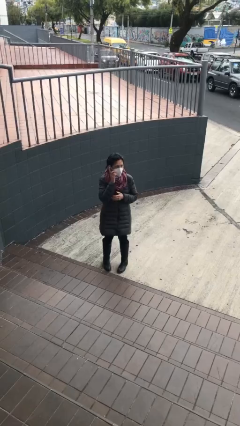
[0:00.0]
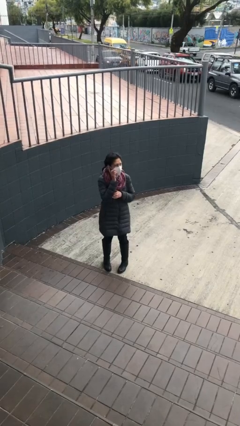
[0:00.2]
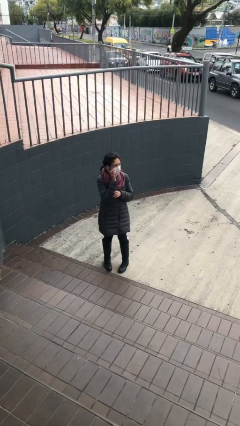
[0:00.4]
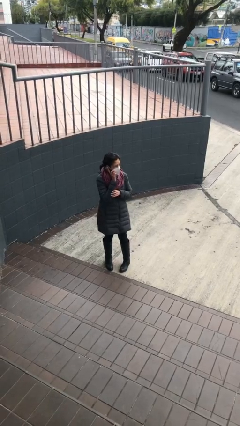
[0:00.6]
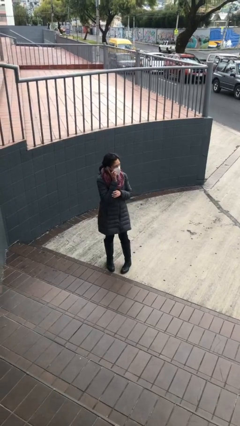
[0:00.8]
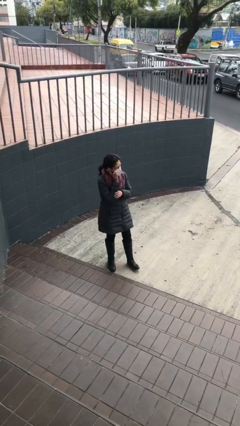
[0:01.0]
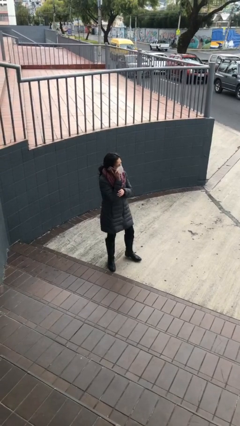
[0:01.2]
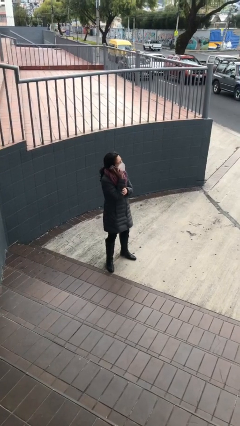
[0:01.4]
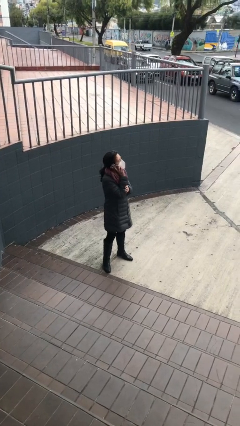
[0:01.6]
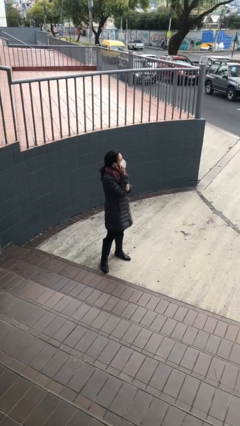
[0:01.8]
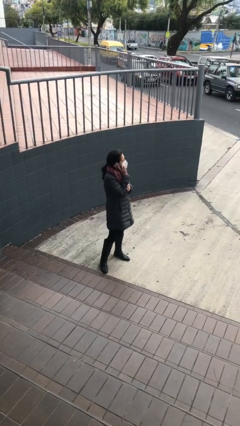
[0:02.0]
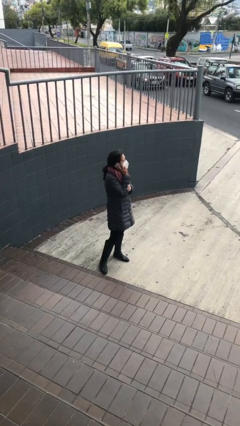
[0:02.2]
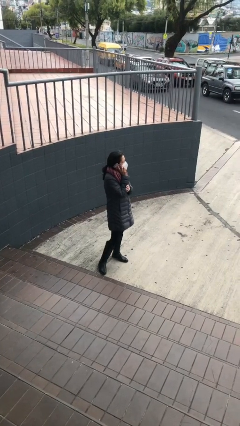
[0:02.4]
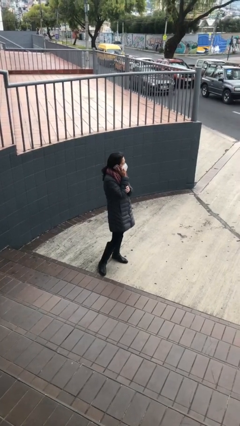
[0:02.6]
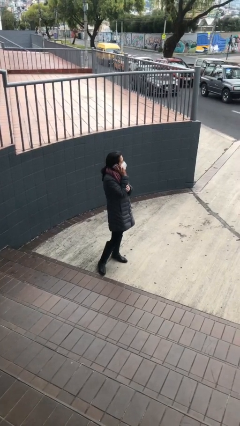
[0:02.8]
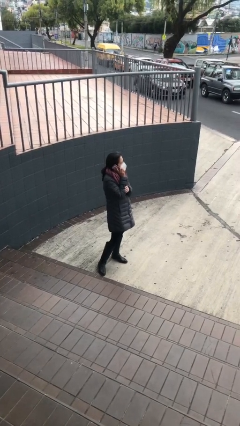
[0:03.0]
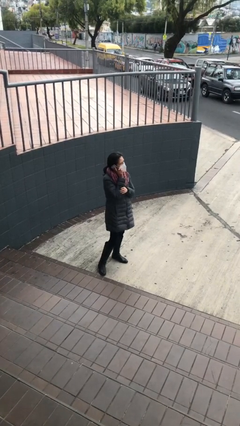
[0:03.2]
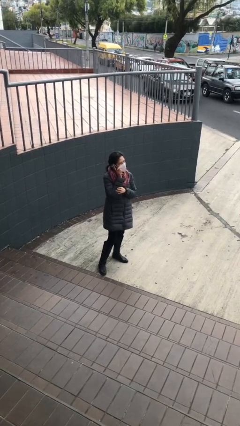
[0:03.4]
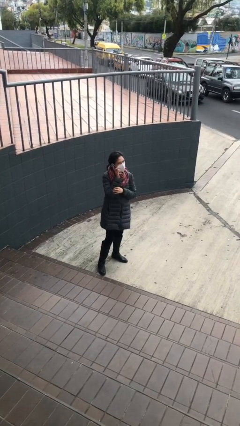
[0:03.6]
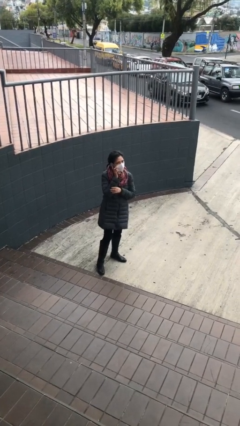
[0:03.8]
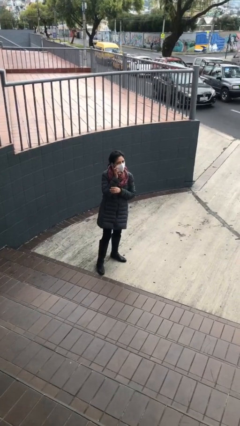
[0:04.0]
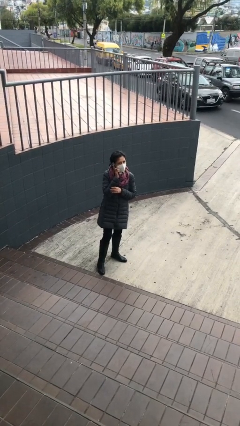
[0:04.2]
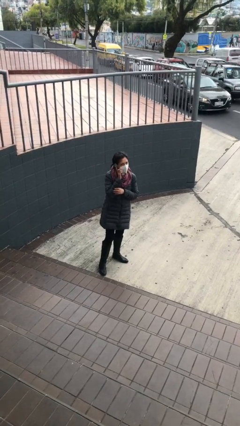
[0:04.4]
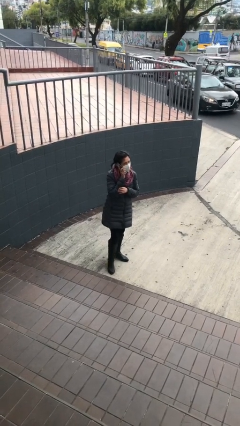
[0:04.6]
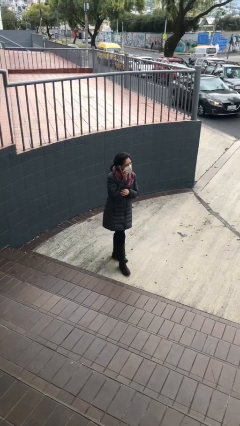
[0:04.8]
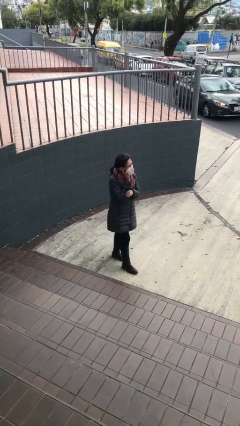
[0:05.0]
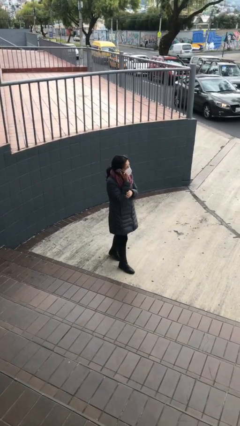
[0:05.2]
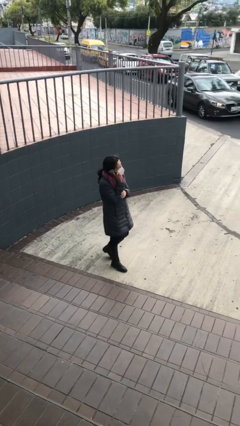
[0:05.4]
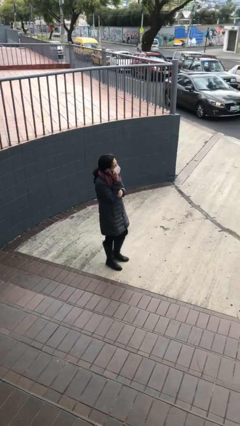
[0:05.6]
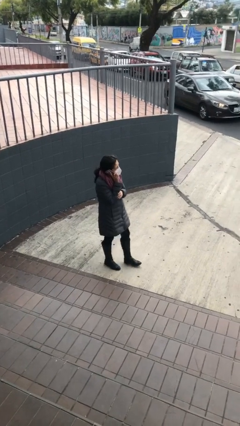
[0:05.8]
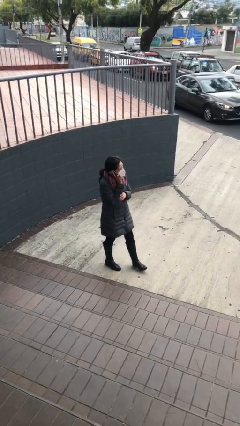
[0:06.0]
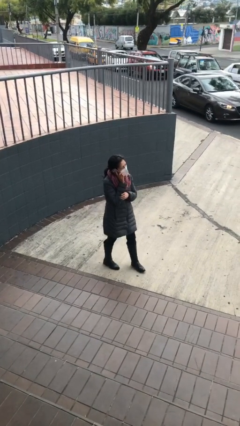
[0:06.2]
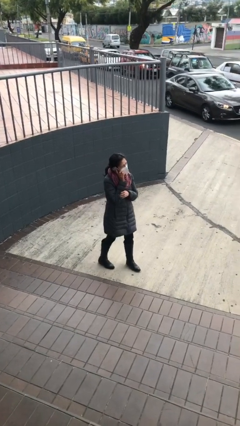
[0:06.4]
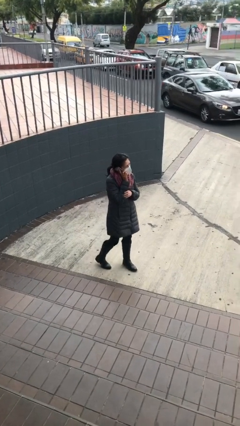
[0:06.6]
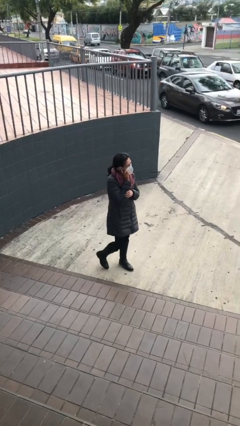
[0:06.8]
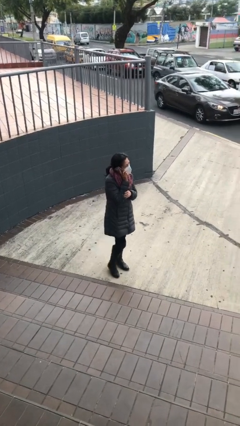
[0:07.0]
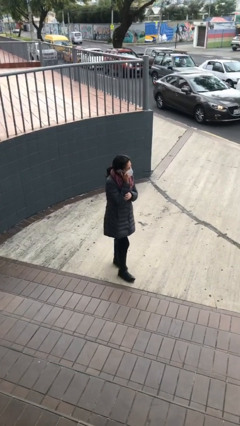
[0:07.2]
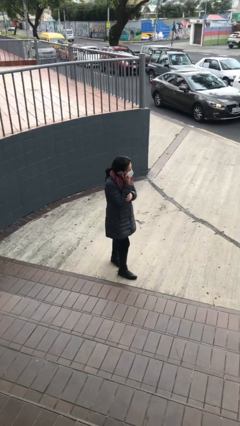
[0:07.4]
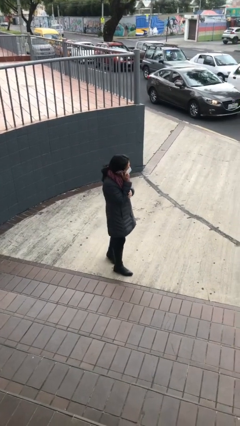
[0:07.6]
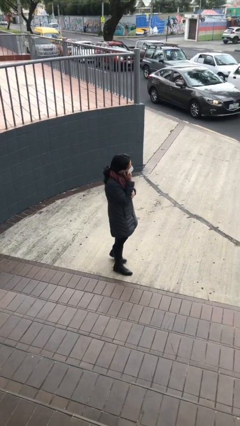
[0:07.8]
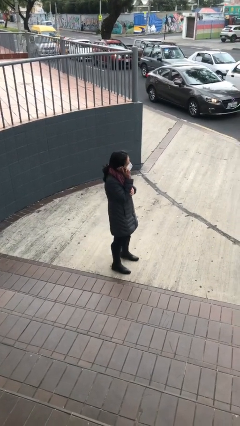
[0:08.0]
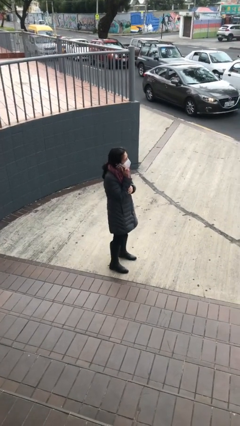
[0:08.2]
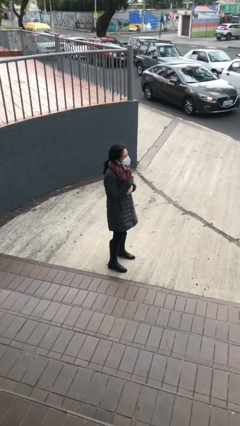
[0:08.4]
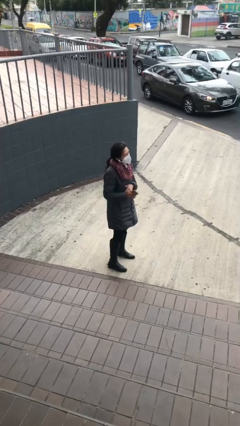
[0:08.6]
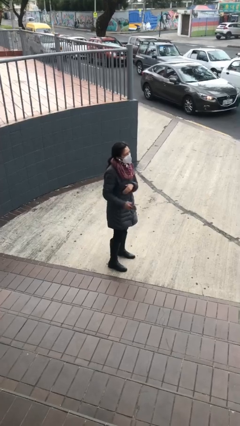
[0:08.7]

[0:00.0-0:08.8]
person talks on phone

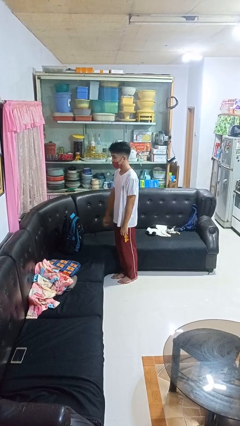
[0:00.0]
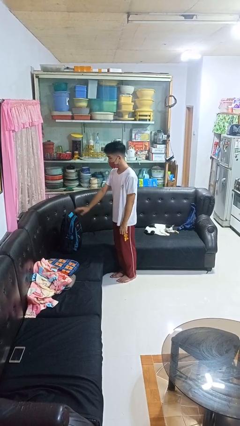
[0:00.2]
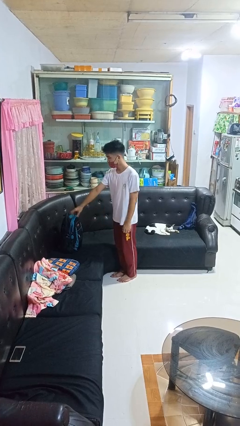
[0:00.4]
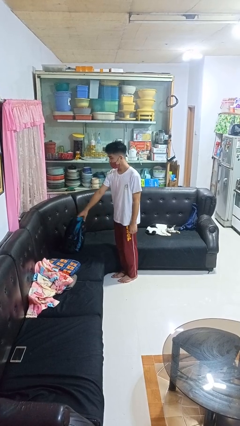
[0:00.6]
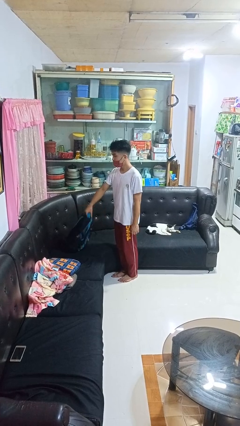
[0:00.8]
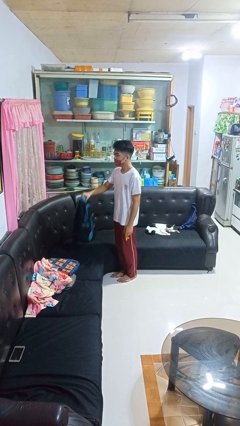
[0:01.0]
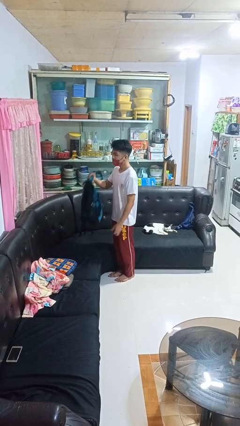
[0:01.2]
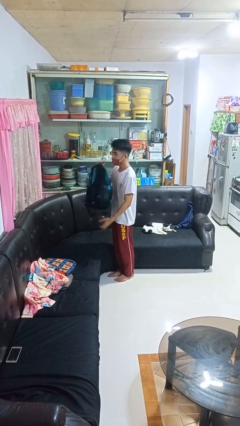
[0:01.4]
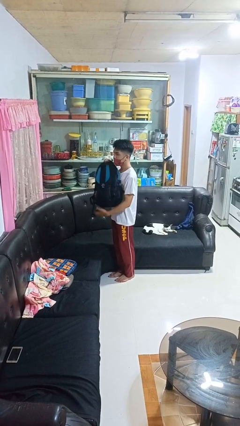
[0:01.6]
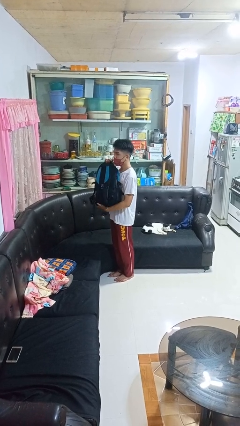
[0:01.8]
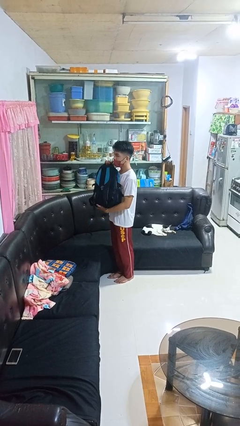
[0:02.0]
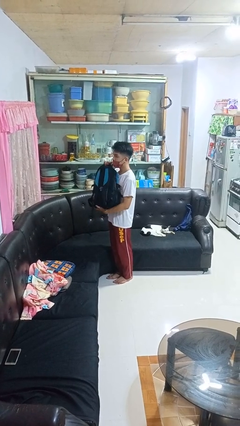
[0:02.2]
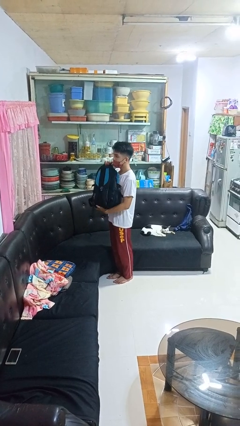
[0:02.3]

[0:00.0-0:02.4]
person picks up object from couch

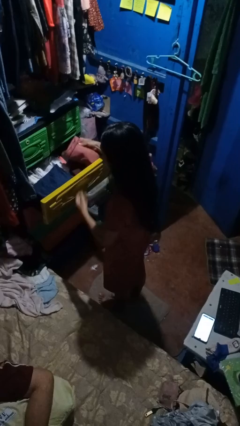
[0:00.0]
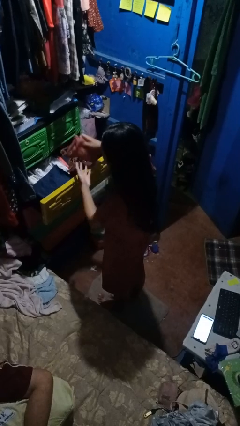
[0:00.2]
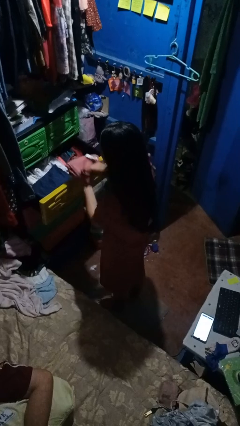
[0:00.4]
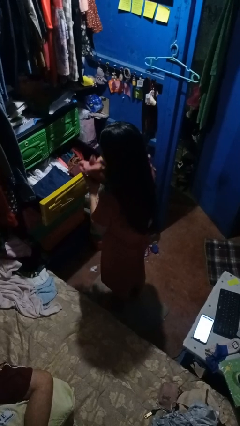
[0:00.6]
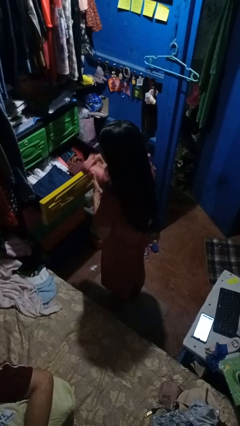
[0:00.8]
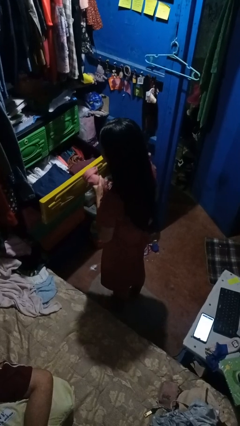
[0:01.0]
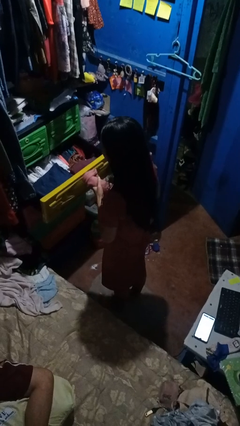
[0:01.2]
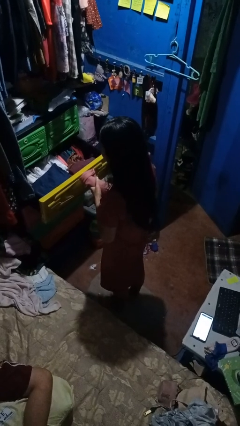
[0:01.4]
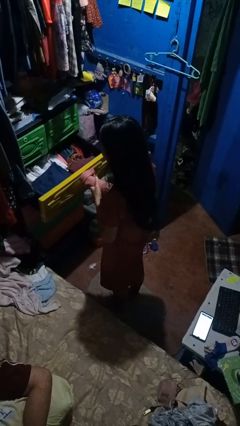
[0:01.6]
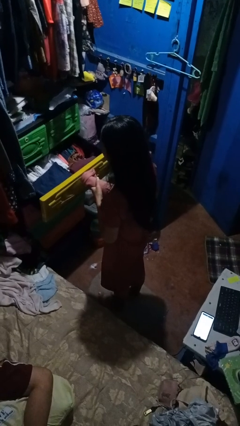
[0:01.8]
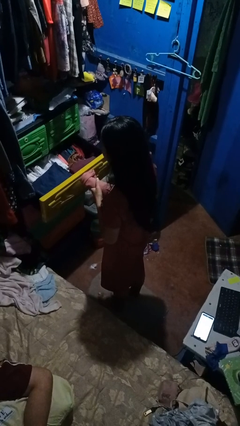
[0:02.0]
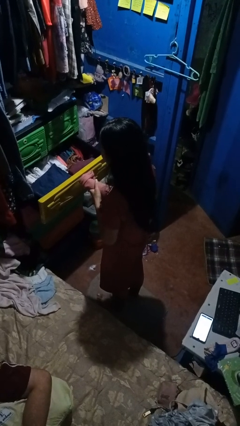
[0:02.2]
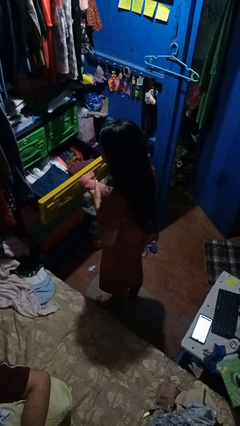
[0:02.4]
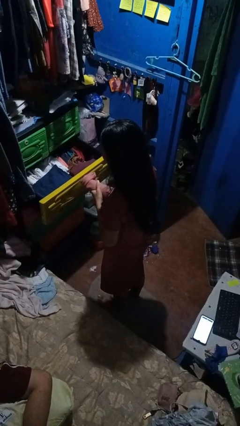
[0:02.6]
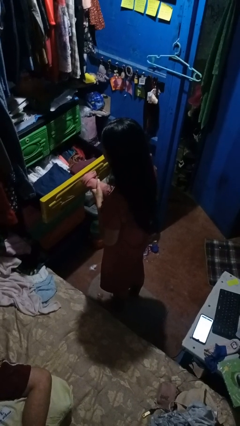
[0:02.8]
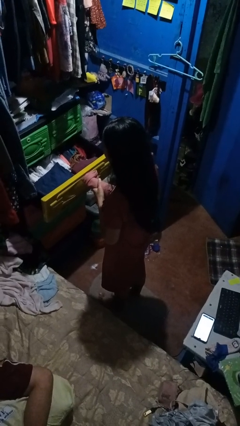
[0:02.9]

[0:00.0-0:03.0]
person takes clothes from dresser

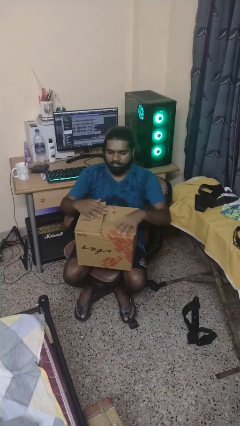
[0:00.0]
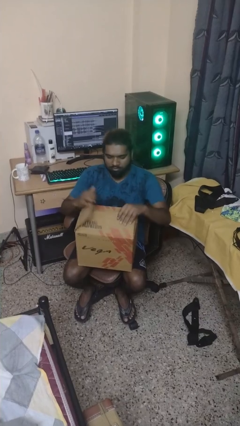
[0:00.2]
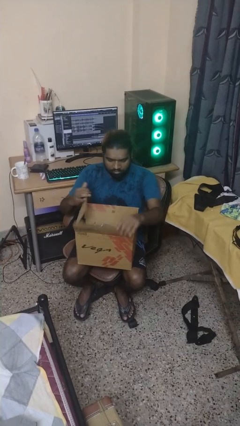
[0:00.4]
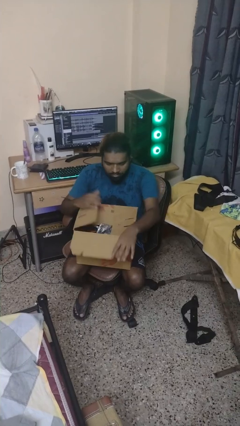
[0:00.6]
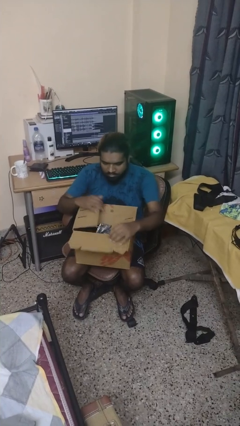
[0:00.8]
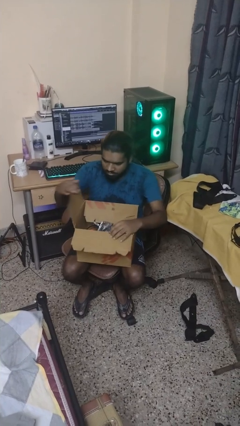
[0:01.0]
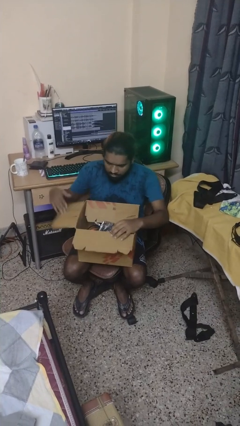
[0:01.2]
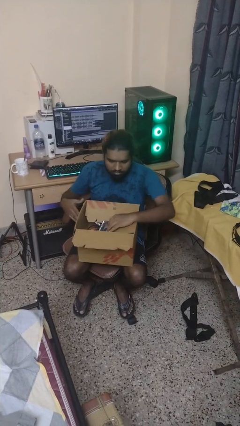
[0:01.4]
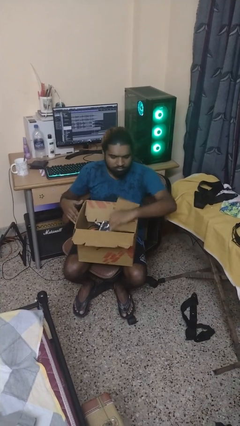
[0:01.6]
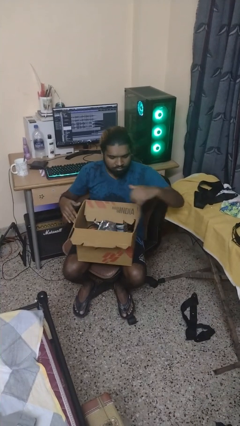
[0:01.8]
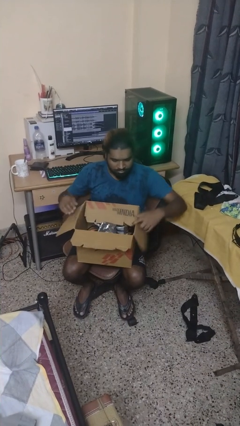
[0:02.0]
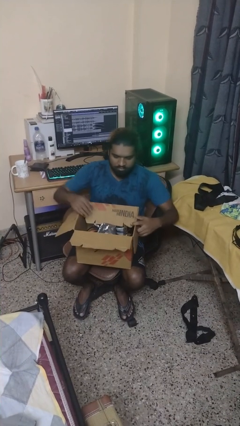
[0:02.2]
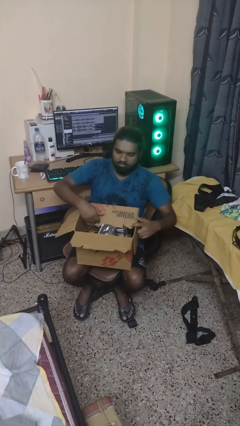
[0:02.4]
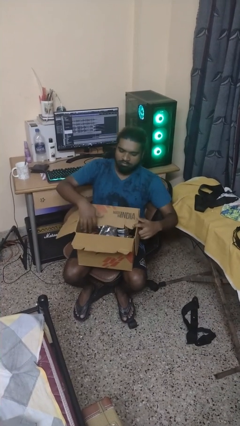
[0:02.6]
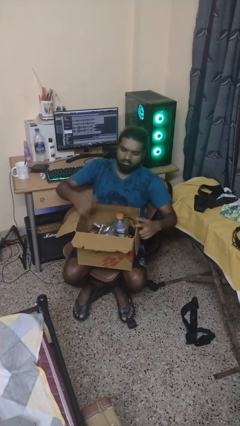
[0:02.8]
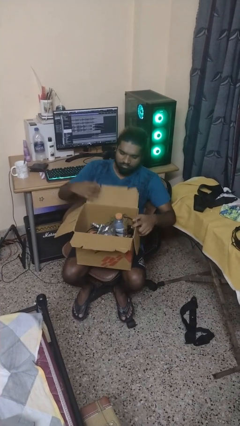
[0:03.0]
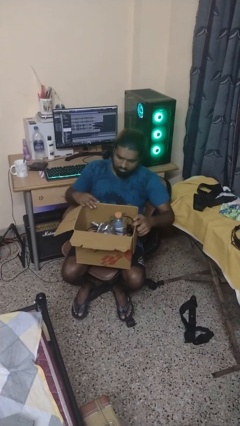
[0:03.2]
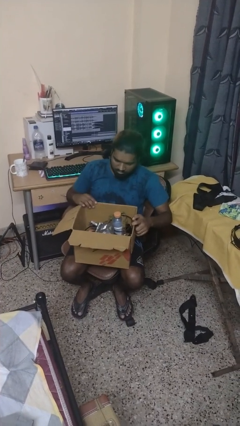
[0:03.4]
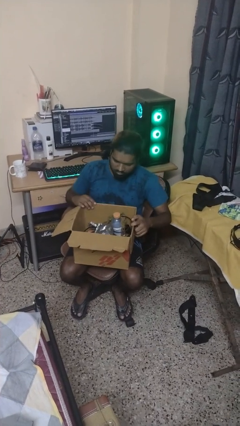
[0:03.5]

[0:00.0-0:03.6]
person opens box

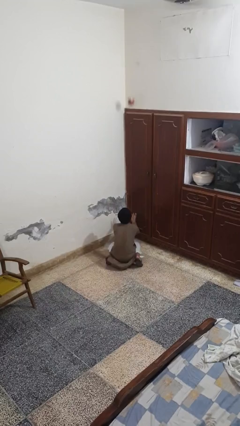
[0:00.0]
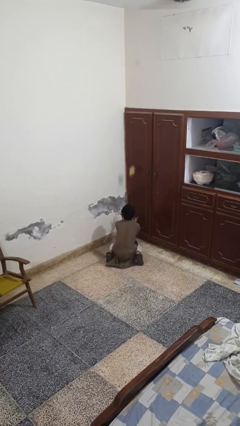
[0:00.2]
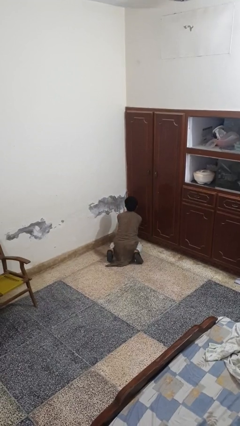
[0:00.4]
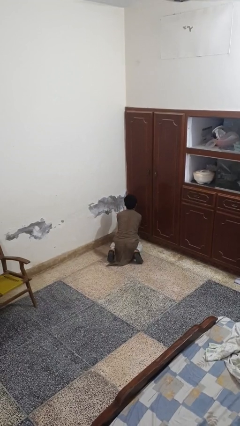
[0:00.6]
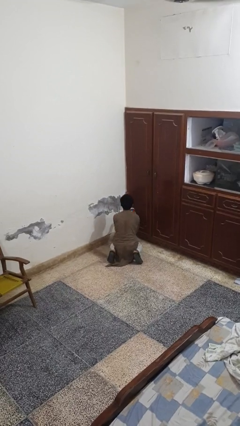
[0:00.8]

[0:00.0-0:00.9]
person catches dropped object
